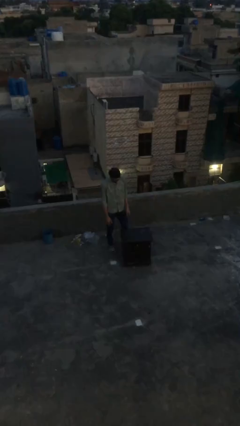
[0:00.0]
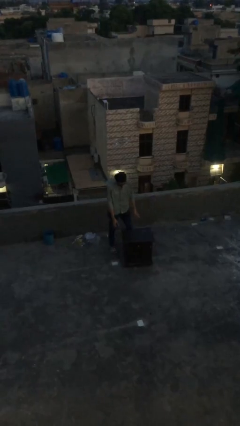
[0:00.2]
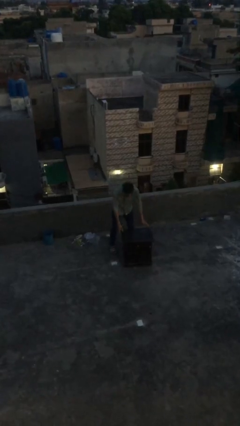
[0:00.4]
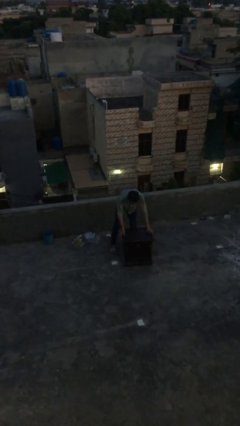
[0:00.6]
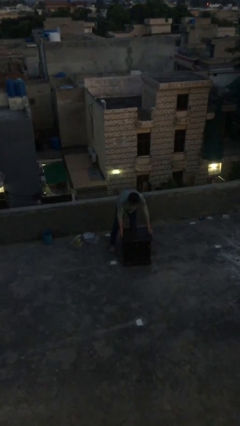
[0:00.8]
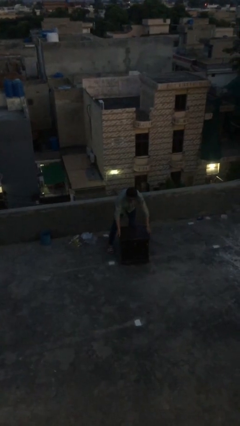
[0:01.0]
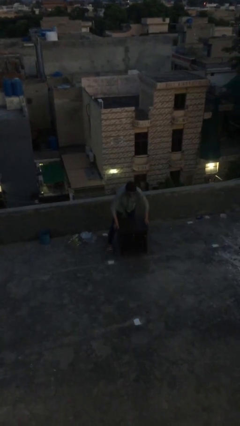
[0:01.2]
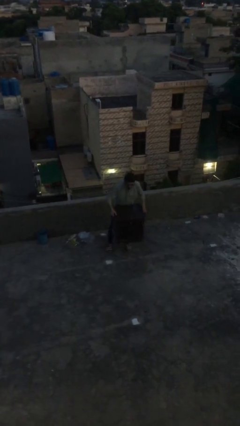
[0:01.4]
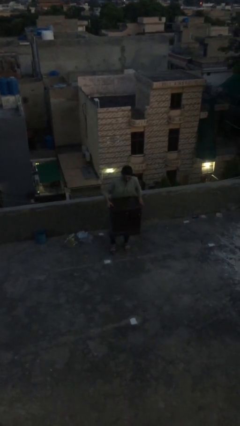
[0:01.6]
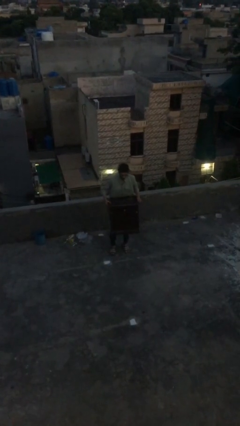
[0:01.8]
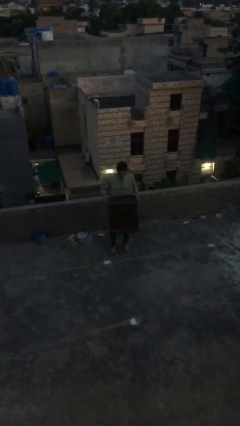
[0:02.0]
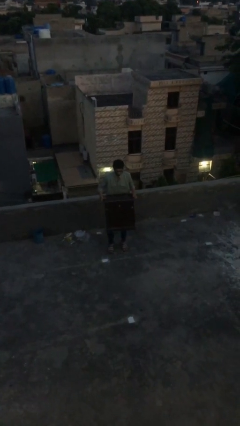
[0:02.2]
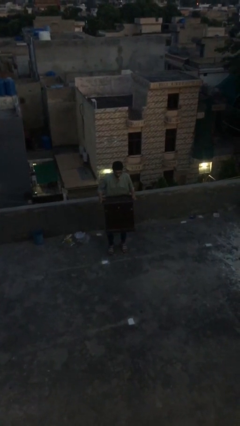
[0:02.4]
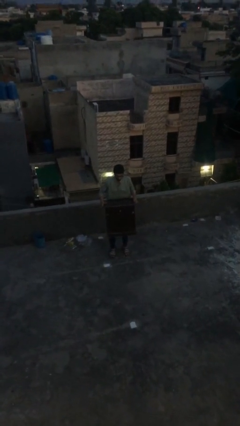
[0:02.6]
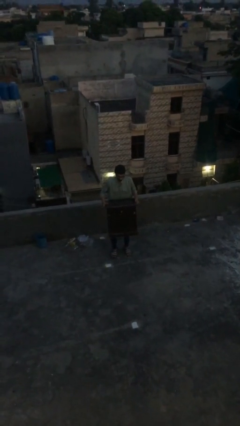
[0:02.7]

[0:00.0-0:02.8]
person picks up object from floor

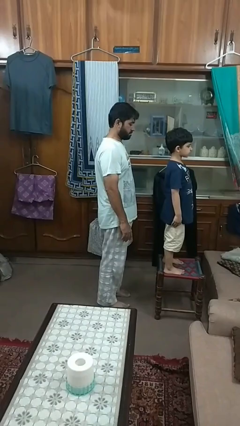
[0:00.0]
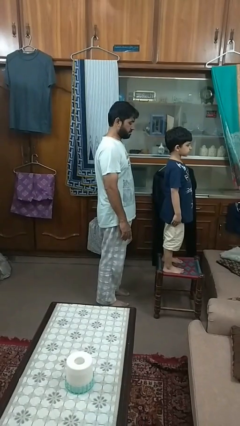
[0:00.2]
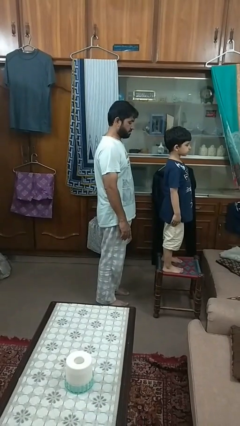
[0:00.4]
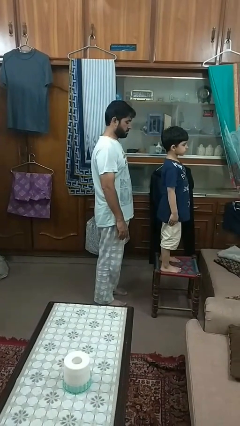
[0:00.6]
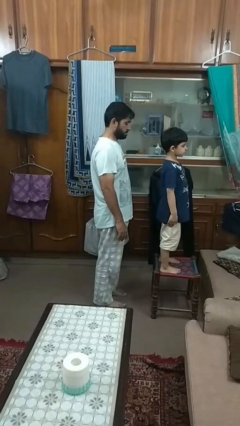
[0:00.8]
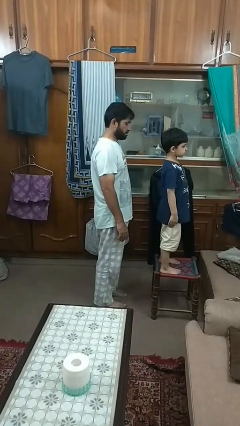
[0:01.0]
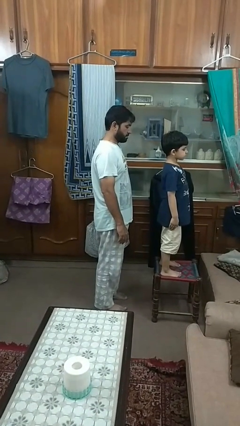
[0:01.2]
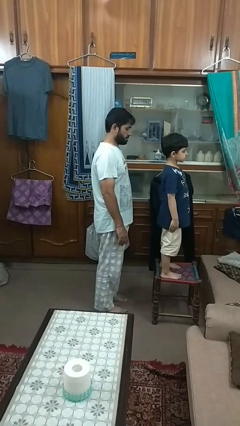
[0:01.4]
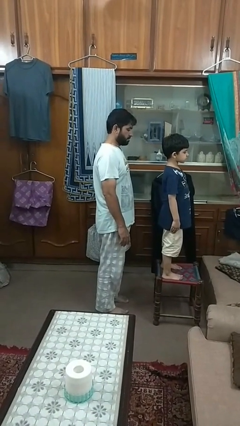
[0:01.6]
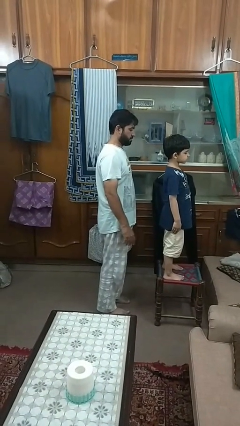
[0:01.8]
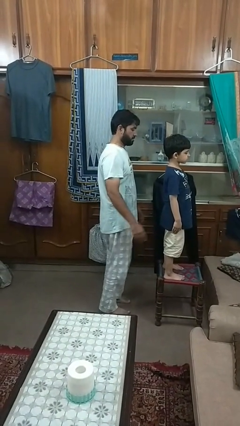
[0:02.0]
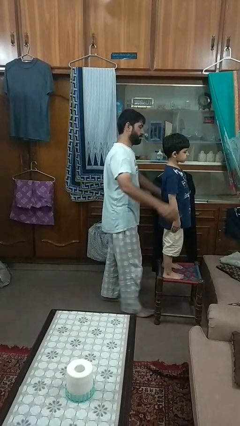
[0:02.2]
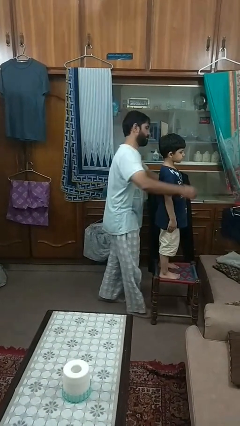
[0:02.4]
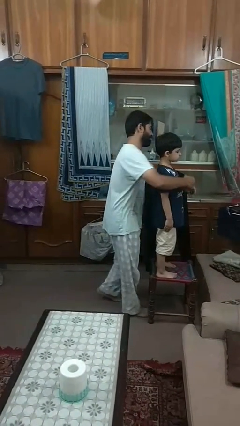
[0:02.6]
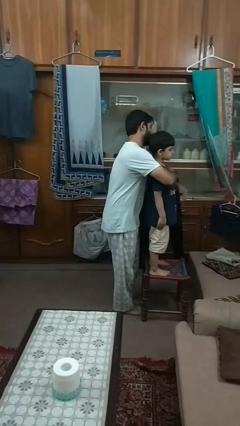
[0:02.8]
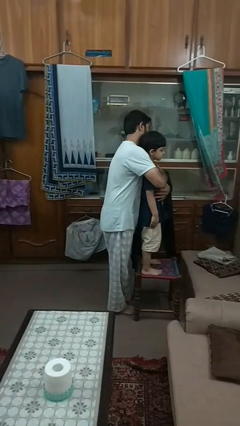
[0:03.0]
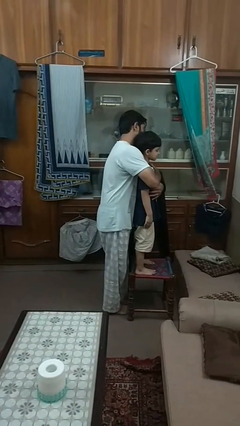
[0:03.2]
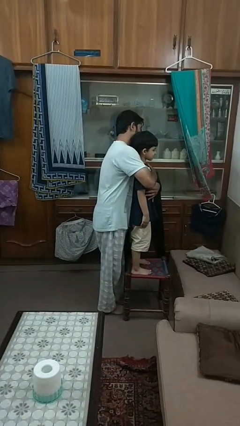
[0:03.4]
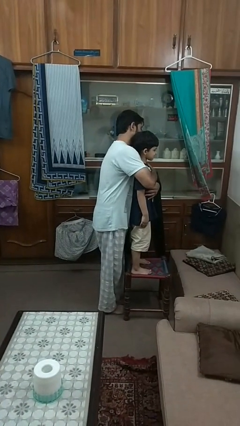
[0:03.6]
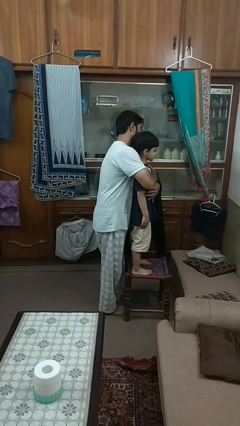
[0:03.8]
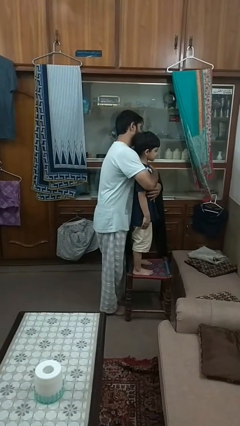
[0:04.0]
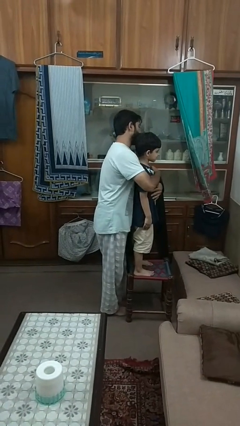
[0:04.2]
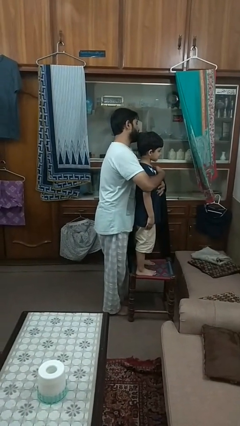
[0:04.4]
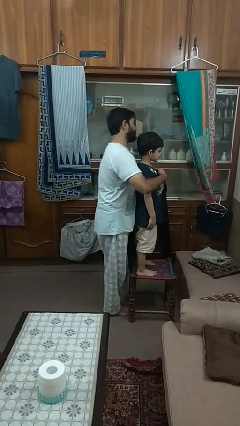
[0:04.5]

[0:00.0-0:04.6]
person hugs person from behind

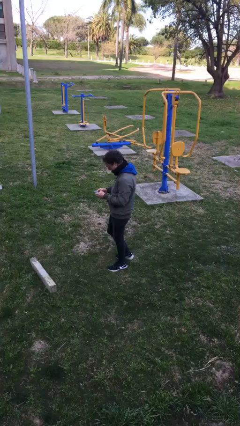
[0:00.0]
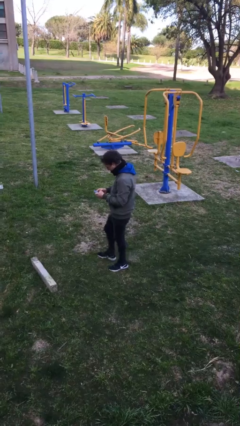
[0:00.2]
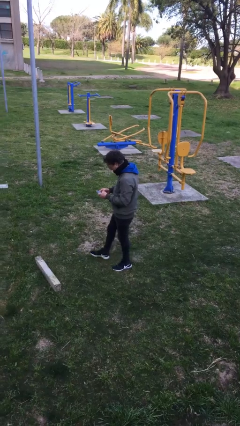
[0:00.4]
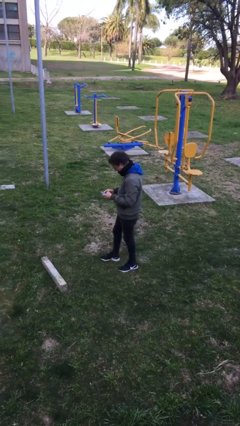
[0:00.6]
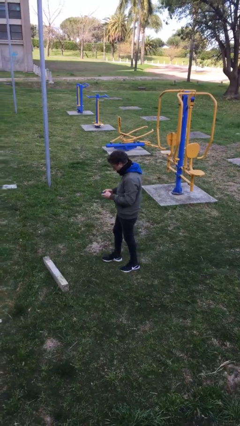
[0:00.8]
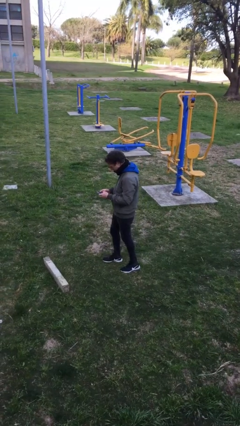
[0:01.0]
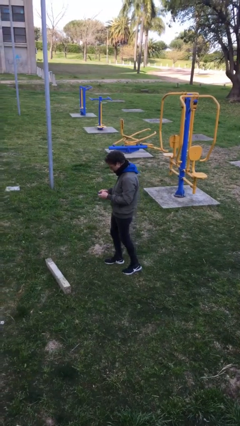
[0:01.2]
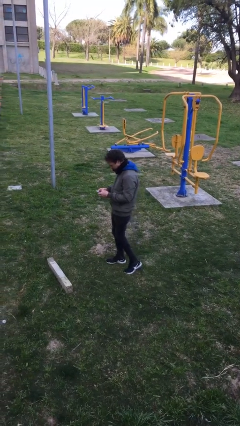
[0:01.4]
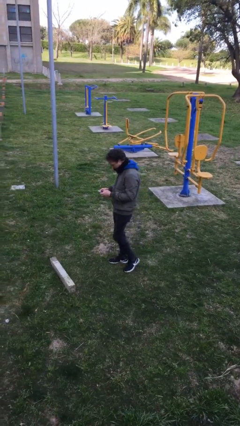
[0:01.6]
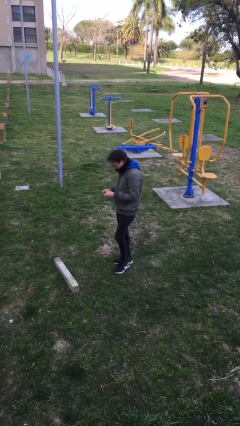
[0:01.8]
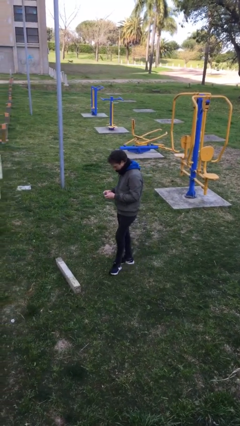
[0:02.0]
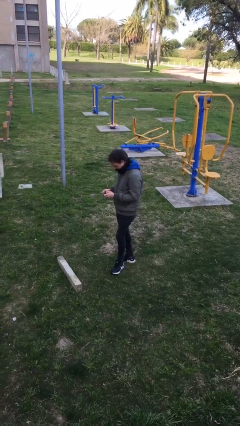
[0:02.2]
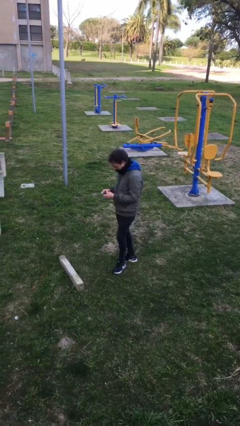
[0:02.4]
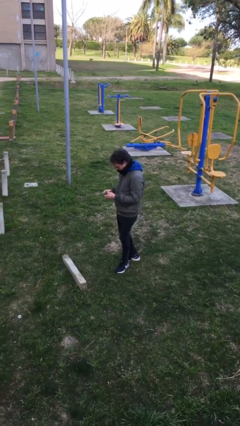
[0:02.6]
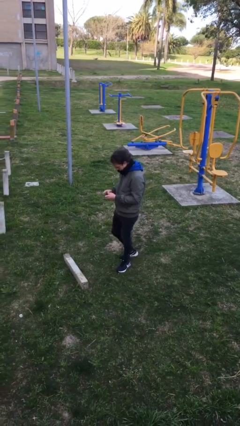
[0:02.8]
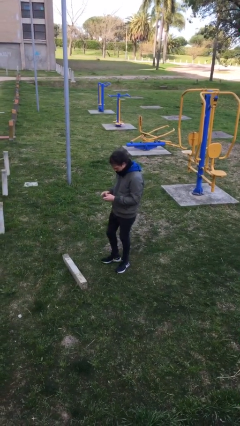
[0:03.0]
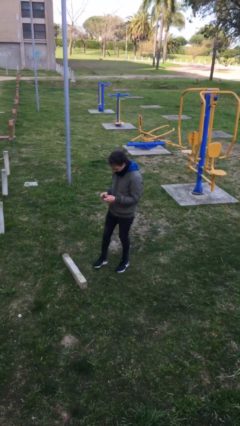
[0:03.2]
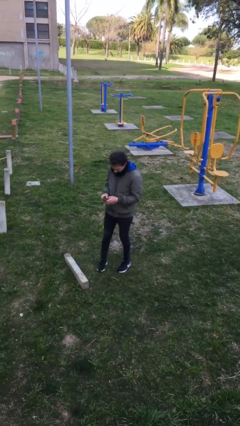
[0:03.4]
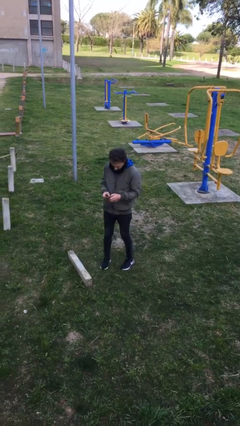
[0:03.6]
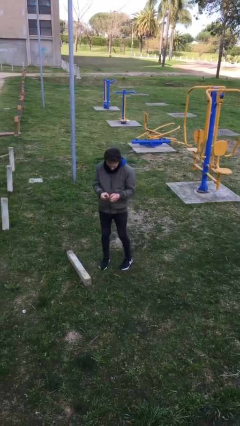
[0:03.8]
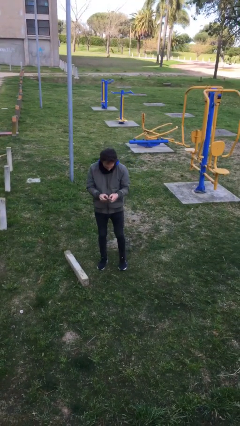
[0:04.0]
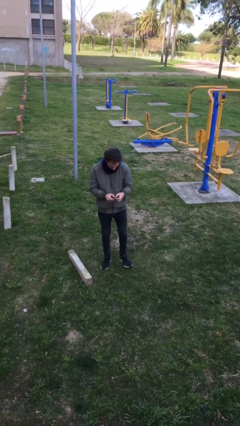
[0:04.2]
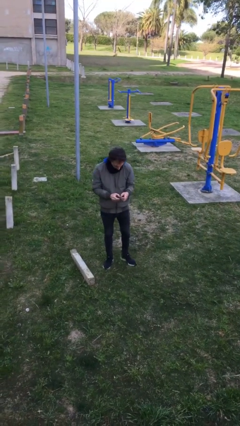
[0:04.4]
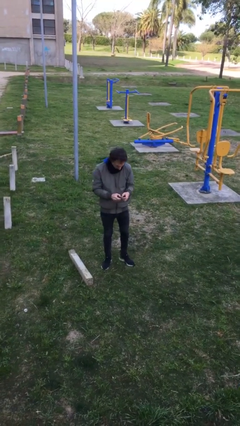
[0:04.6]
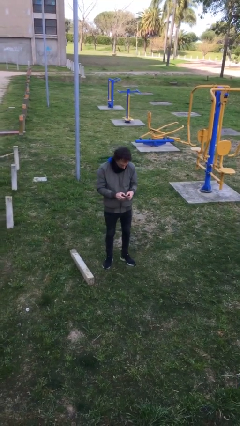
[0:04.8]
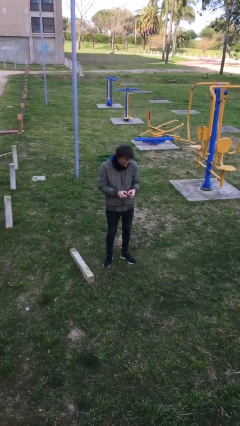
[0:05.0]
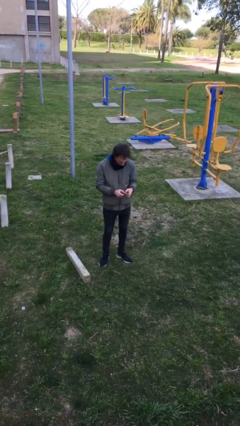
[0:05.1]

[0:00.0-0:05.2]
person texts on phone

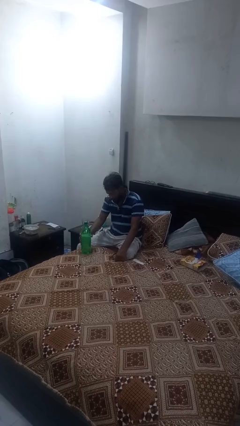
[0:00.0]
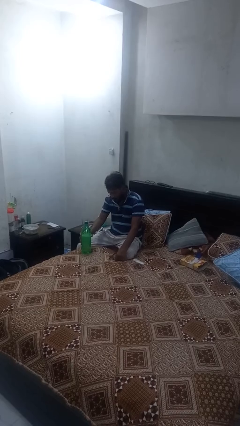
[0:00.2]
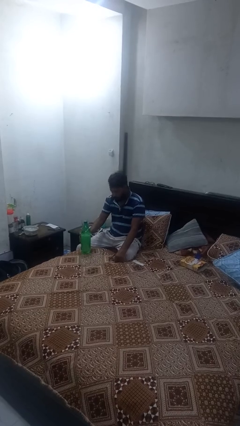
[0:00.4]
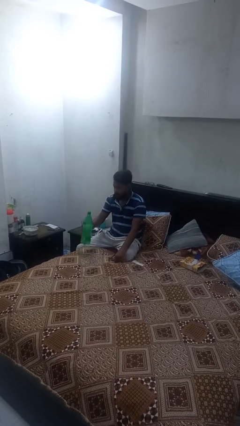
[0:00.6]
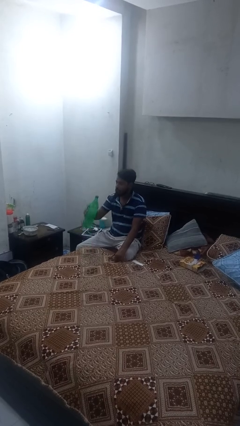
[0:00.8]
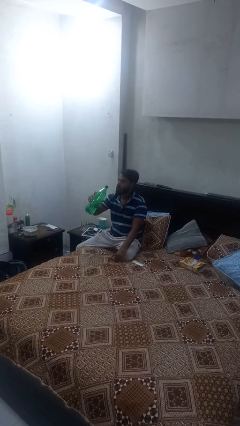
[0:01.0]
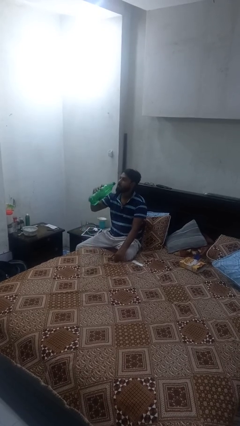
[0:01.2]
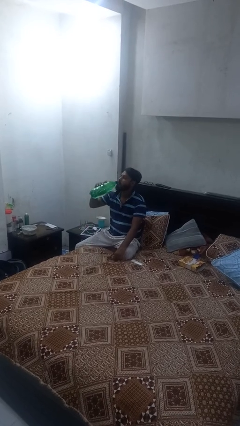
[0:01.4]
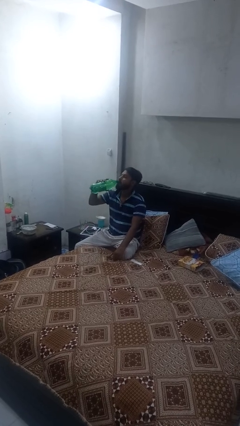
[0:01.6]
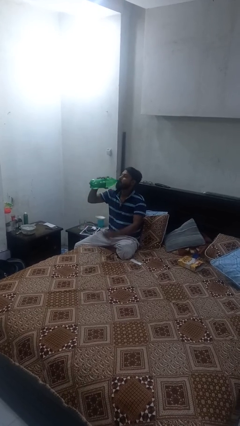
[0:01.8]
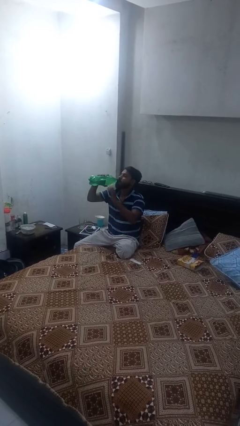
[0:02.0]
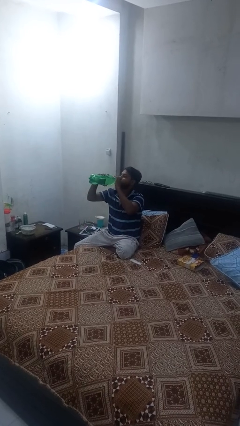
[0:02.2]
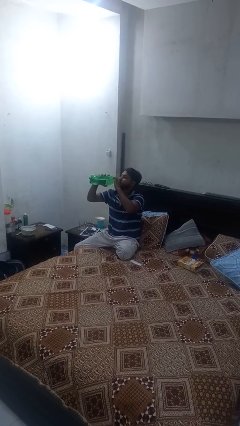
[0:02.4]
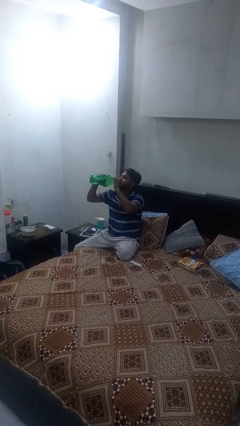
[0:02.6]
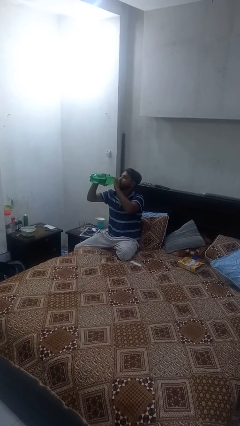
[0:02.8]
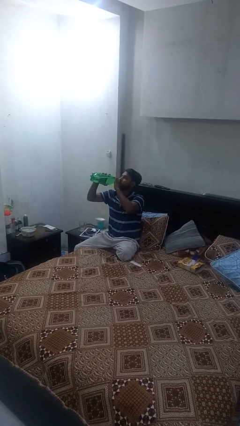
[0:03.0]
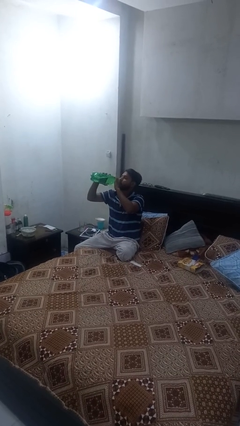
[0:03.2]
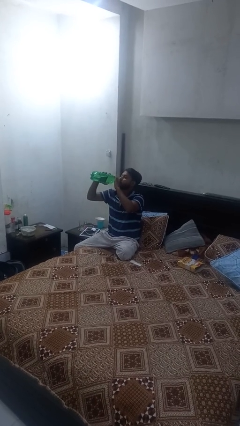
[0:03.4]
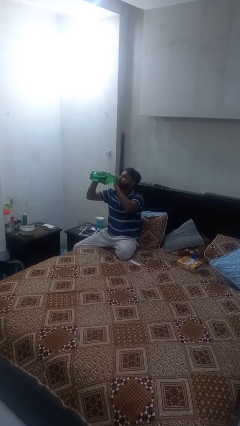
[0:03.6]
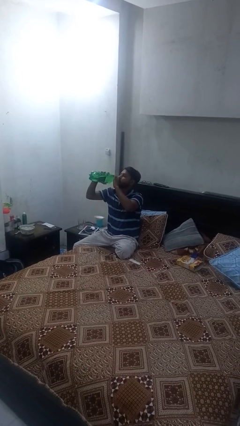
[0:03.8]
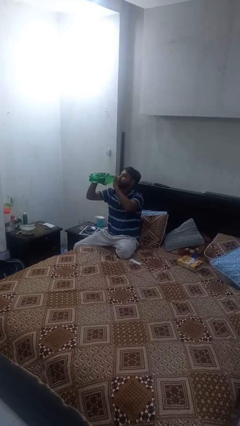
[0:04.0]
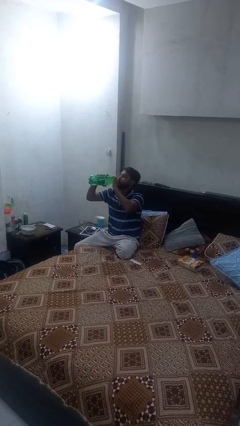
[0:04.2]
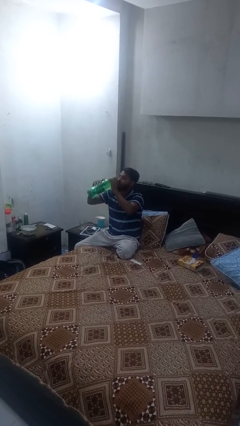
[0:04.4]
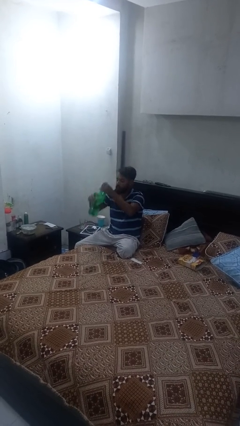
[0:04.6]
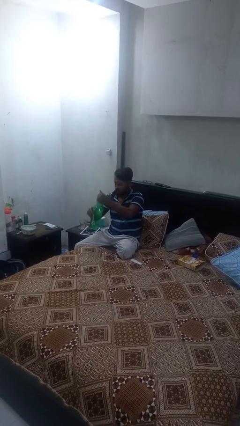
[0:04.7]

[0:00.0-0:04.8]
person drinks from bottle

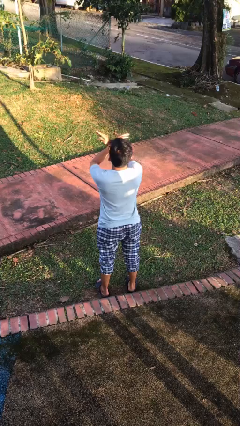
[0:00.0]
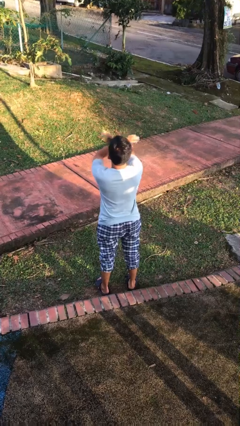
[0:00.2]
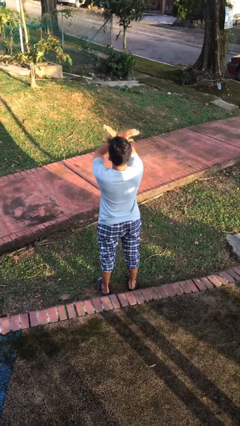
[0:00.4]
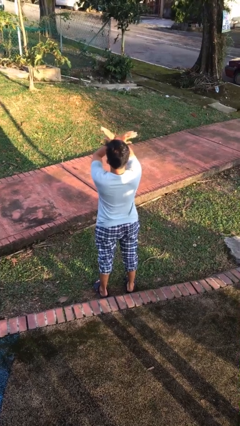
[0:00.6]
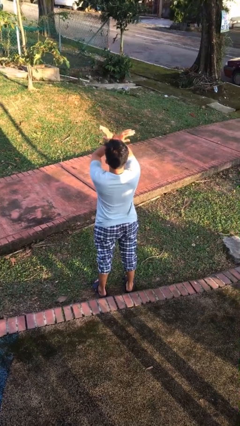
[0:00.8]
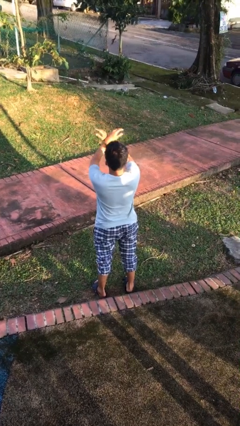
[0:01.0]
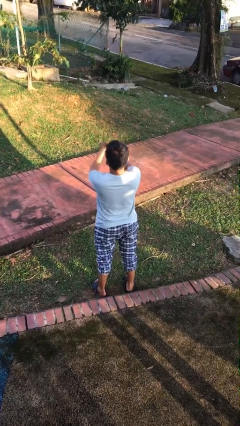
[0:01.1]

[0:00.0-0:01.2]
person gestures arms x
